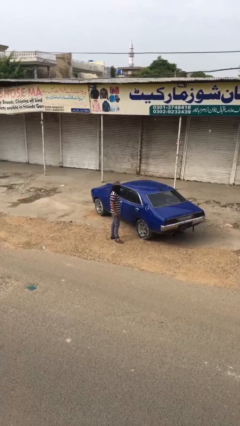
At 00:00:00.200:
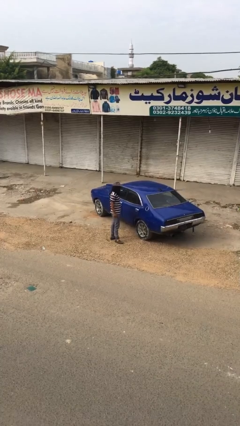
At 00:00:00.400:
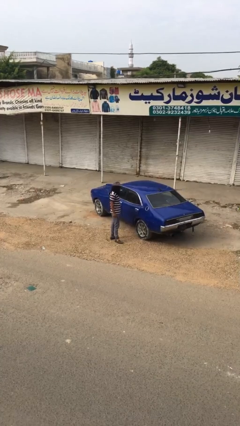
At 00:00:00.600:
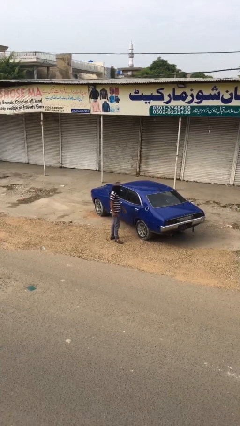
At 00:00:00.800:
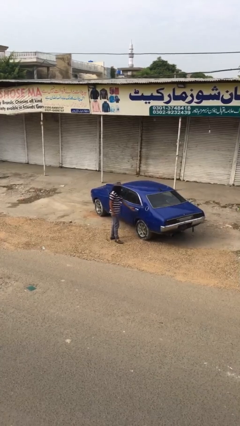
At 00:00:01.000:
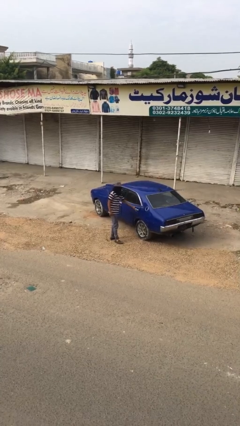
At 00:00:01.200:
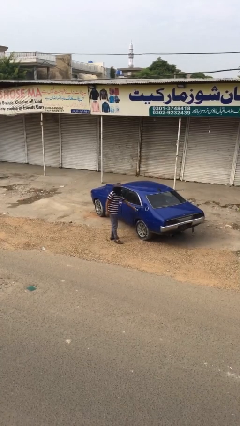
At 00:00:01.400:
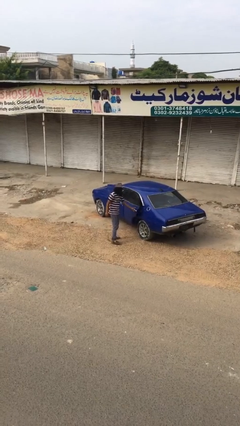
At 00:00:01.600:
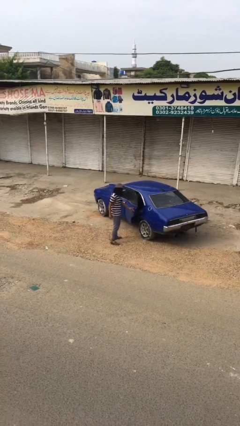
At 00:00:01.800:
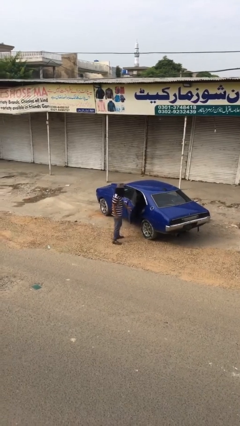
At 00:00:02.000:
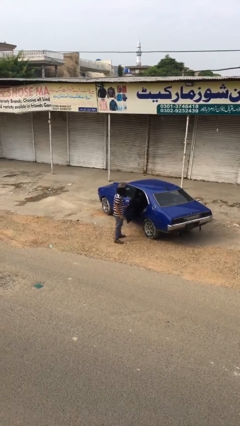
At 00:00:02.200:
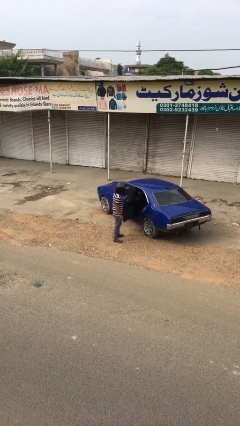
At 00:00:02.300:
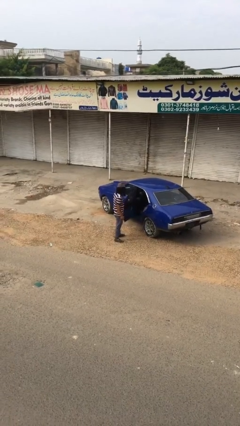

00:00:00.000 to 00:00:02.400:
person opens car door

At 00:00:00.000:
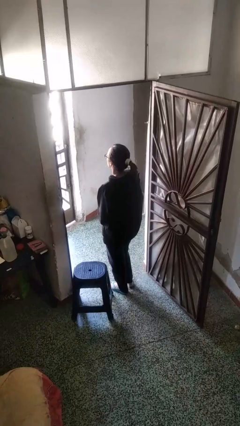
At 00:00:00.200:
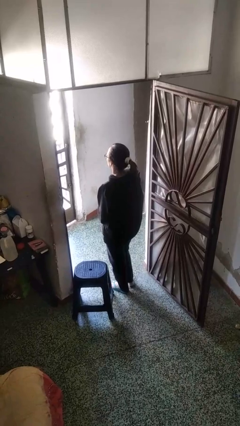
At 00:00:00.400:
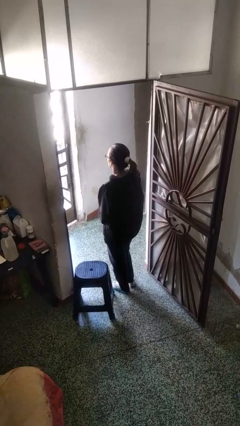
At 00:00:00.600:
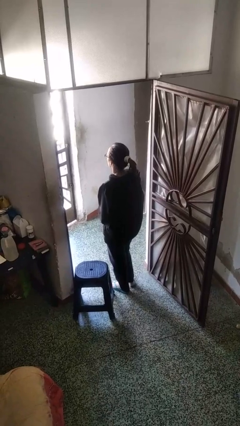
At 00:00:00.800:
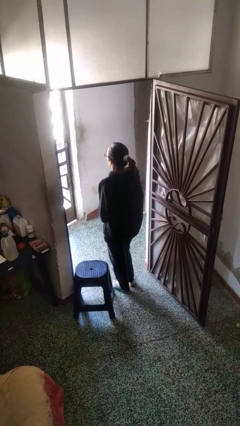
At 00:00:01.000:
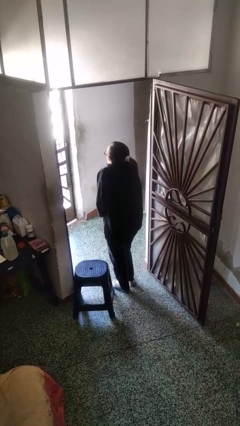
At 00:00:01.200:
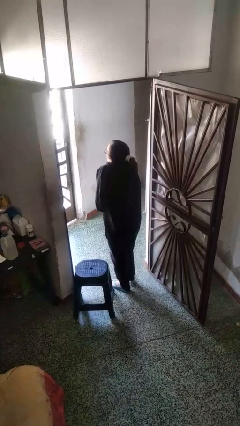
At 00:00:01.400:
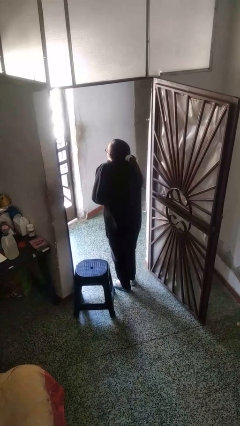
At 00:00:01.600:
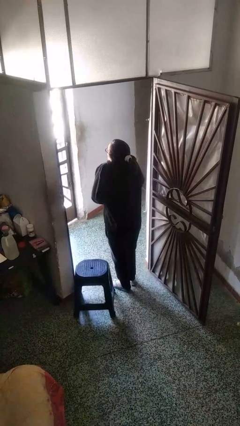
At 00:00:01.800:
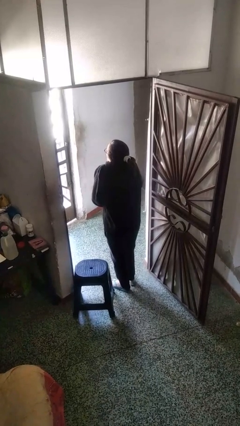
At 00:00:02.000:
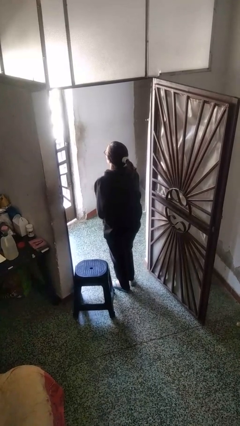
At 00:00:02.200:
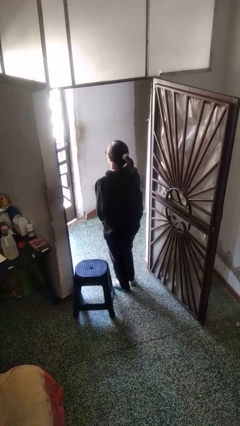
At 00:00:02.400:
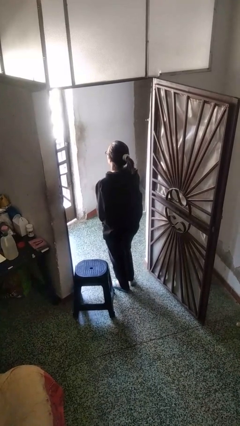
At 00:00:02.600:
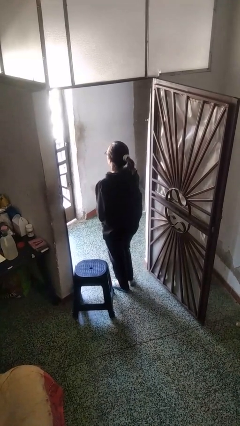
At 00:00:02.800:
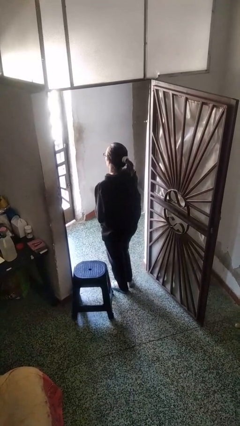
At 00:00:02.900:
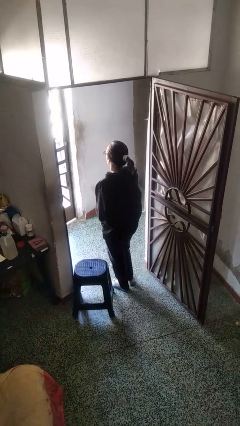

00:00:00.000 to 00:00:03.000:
person shrugs

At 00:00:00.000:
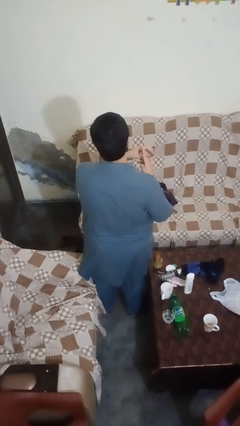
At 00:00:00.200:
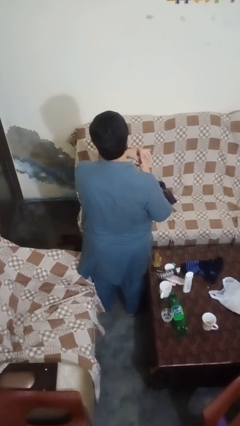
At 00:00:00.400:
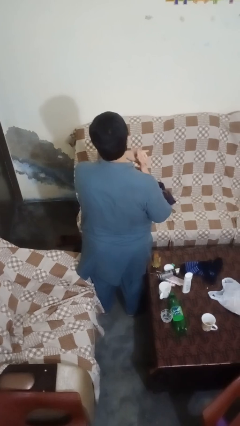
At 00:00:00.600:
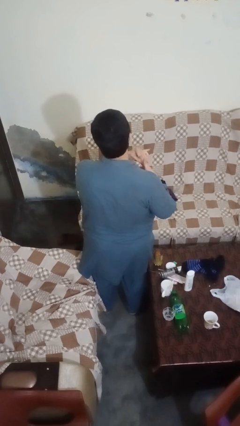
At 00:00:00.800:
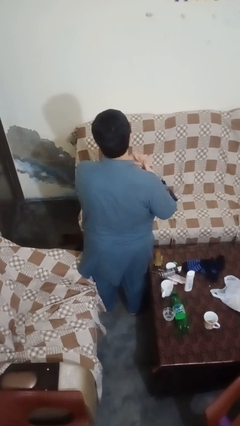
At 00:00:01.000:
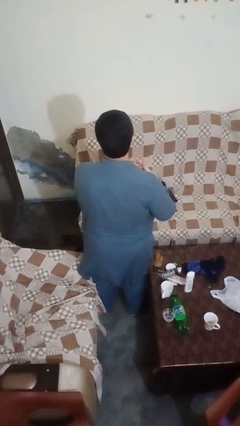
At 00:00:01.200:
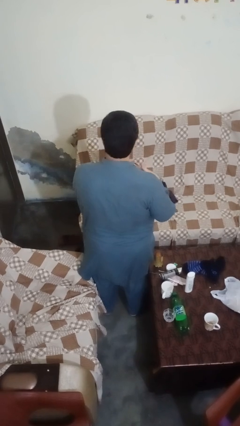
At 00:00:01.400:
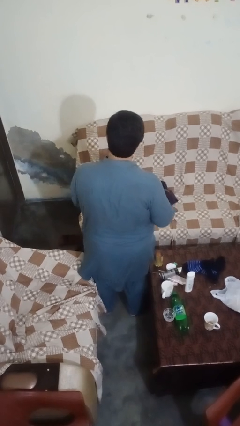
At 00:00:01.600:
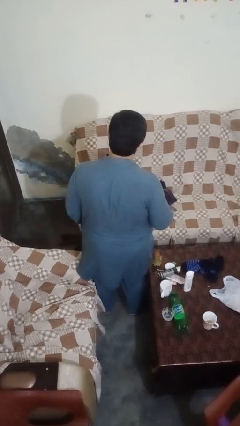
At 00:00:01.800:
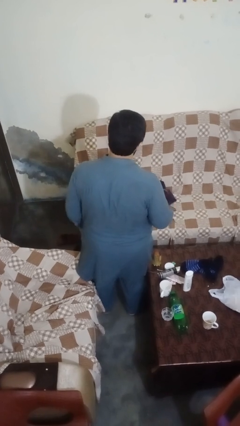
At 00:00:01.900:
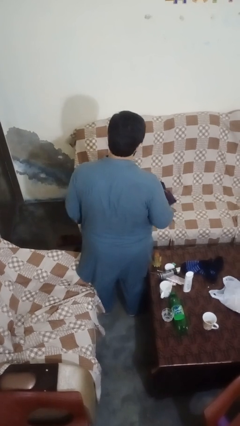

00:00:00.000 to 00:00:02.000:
person takes off ring

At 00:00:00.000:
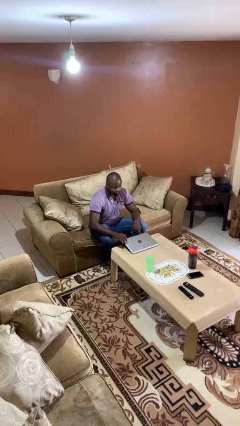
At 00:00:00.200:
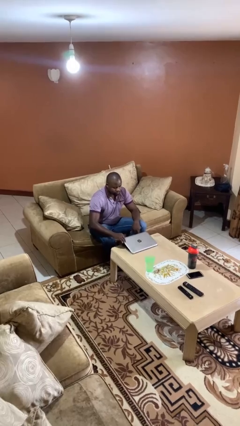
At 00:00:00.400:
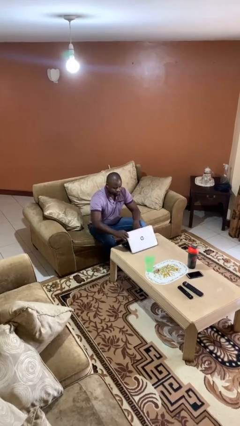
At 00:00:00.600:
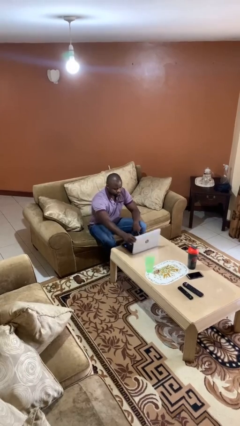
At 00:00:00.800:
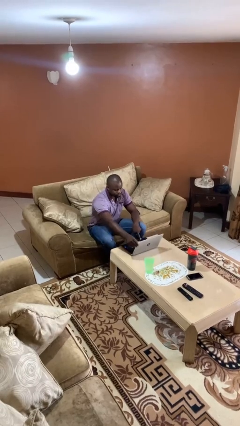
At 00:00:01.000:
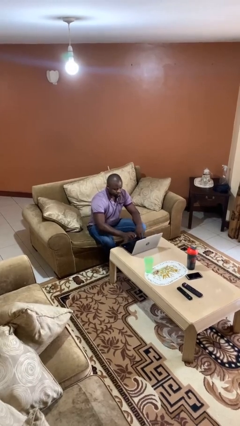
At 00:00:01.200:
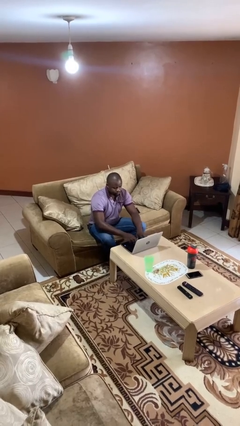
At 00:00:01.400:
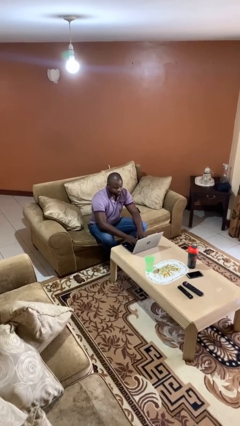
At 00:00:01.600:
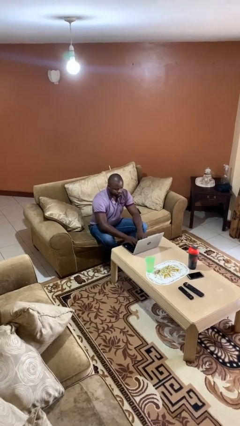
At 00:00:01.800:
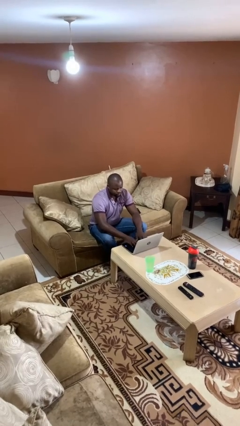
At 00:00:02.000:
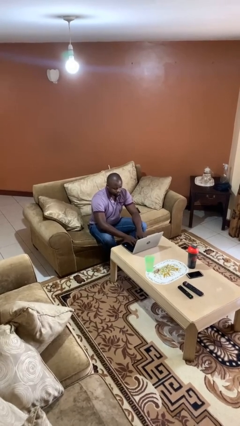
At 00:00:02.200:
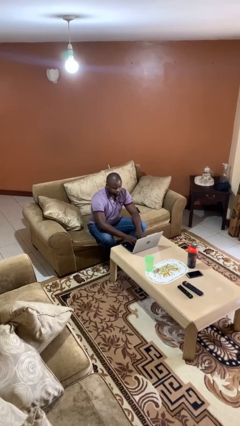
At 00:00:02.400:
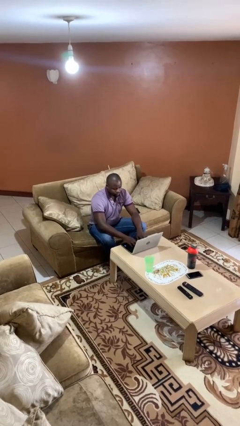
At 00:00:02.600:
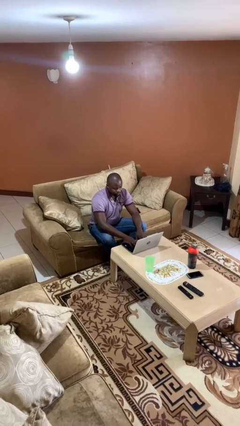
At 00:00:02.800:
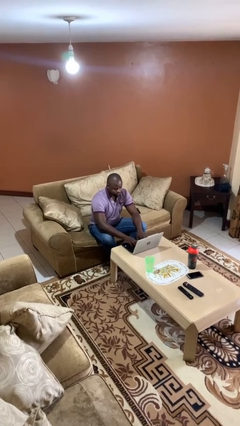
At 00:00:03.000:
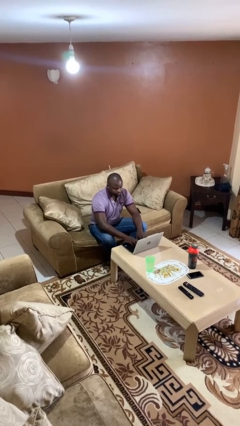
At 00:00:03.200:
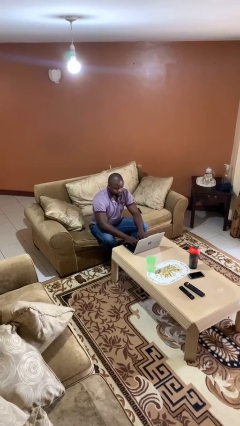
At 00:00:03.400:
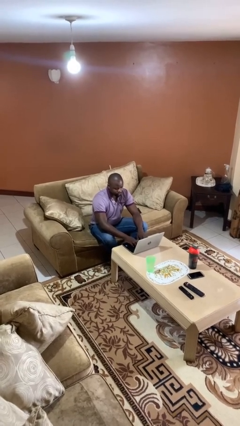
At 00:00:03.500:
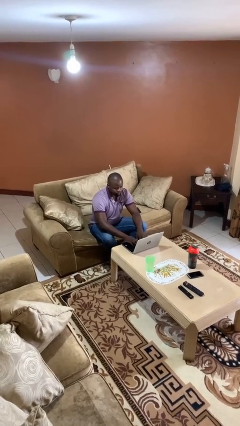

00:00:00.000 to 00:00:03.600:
person interacts with laptop

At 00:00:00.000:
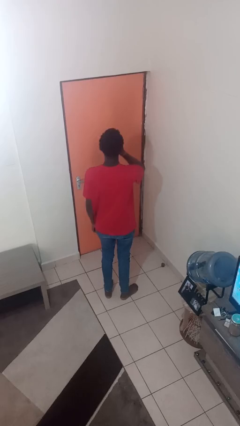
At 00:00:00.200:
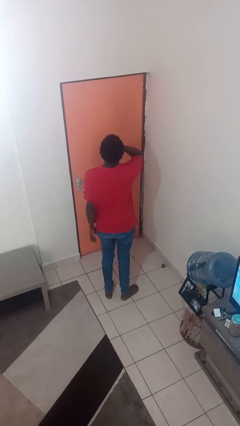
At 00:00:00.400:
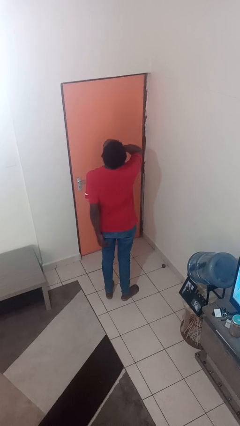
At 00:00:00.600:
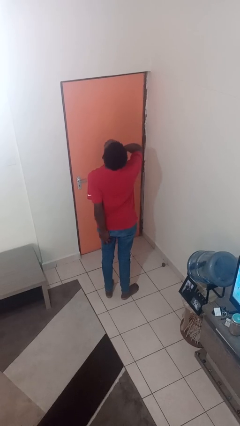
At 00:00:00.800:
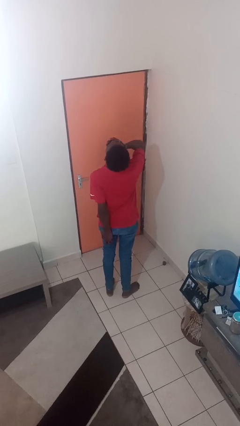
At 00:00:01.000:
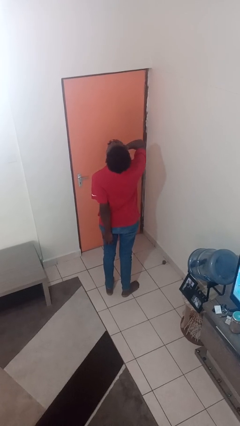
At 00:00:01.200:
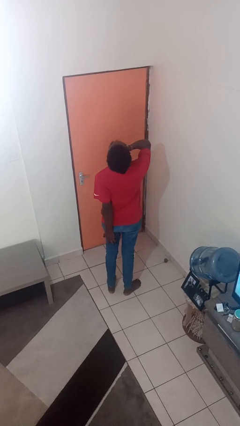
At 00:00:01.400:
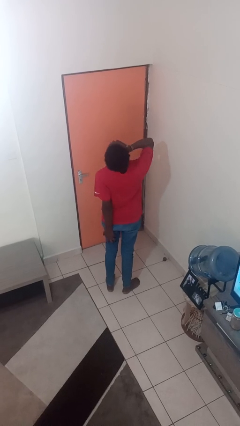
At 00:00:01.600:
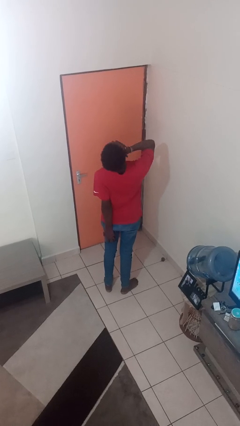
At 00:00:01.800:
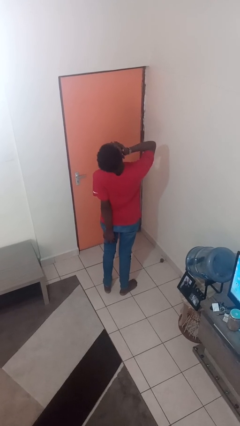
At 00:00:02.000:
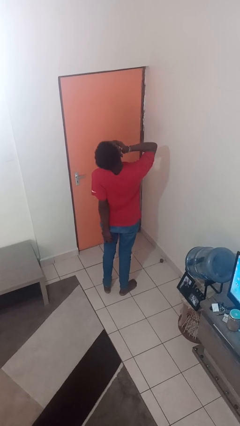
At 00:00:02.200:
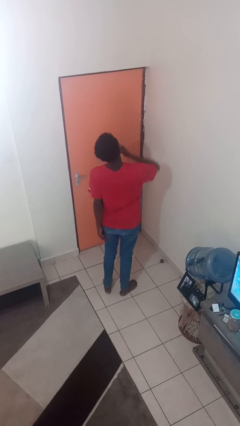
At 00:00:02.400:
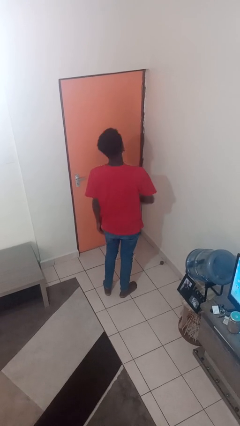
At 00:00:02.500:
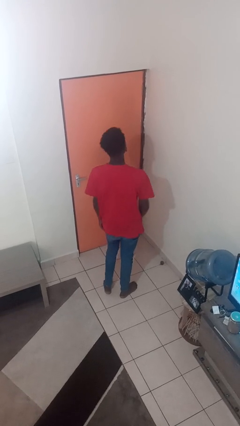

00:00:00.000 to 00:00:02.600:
person yawns

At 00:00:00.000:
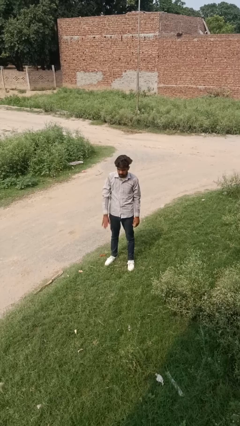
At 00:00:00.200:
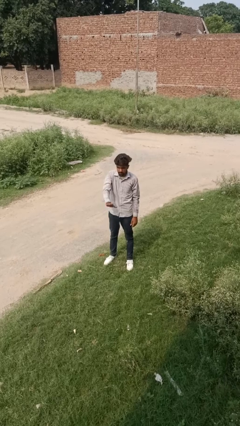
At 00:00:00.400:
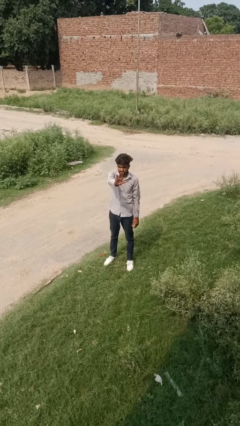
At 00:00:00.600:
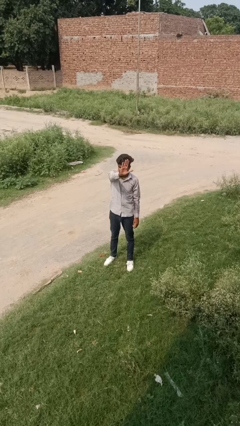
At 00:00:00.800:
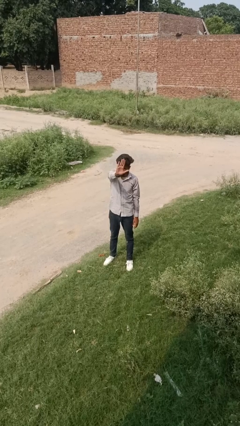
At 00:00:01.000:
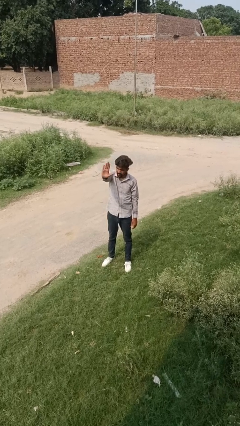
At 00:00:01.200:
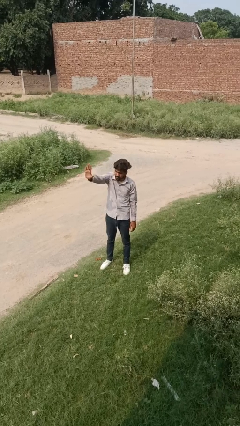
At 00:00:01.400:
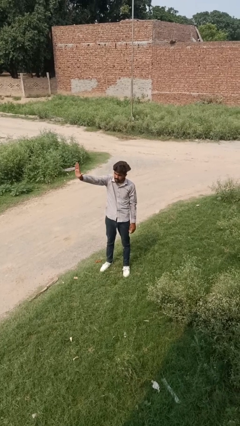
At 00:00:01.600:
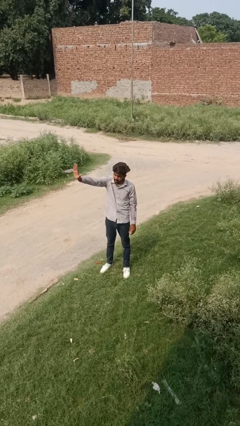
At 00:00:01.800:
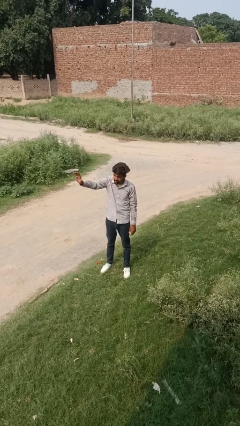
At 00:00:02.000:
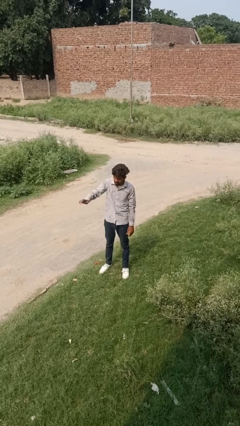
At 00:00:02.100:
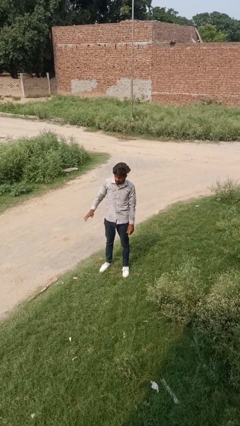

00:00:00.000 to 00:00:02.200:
person gestures swipe right

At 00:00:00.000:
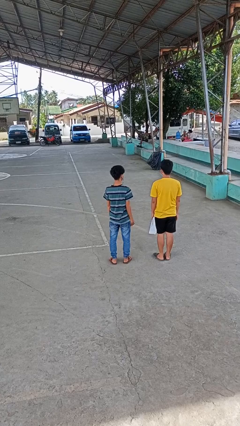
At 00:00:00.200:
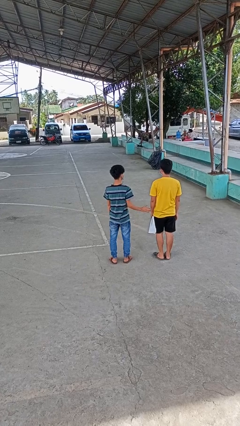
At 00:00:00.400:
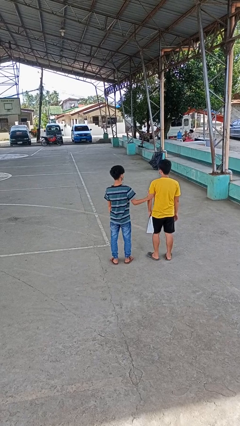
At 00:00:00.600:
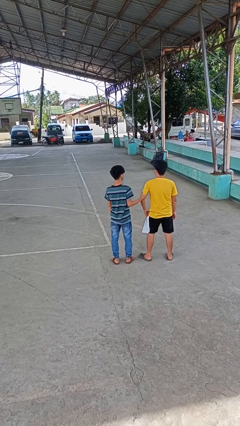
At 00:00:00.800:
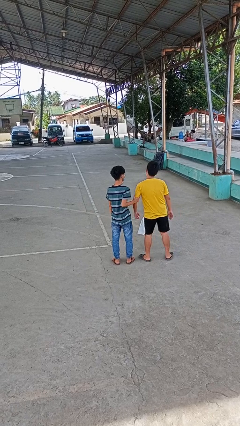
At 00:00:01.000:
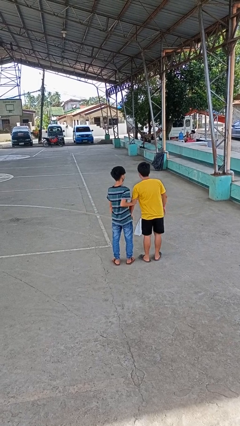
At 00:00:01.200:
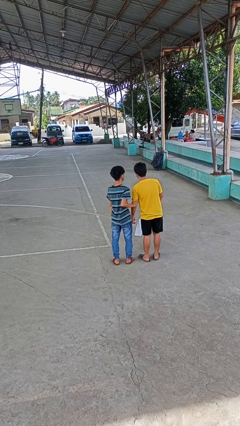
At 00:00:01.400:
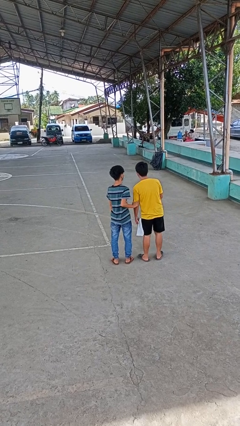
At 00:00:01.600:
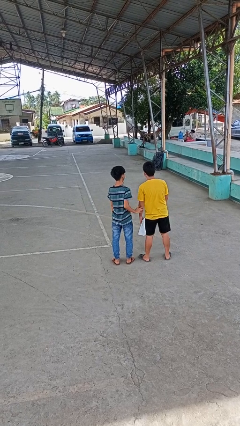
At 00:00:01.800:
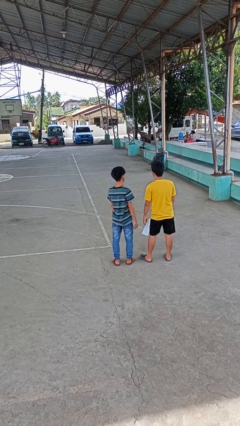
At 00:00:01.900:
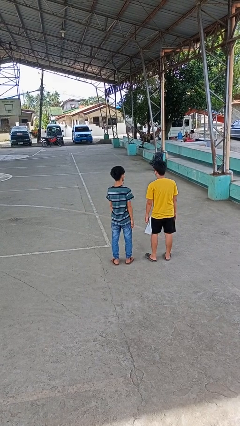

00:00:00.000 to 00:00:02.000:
person grabs person by bicep
